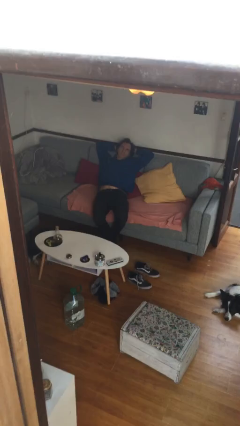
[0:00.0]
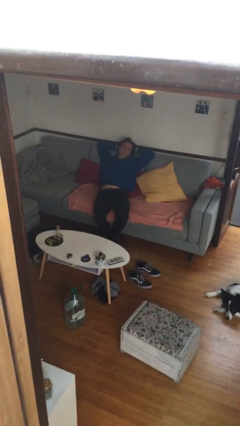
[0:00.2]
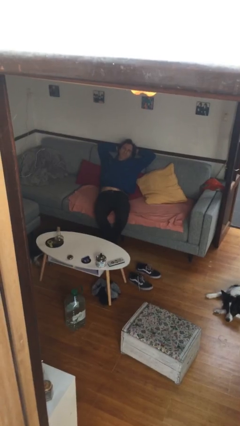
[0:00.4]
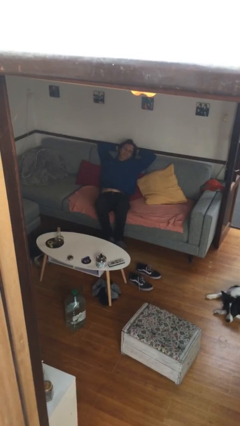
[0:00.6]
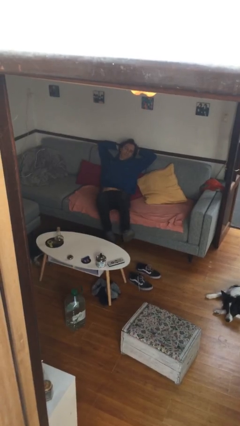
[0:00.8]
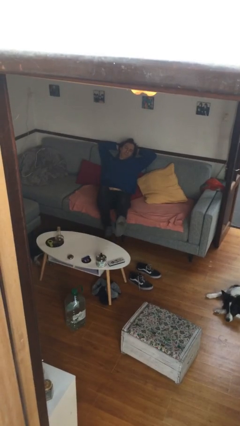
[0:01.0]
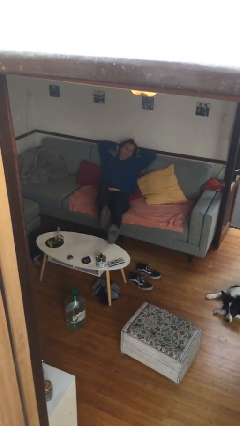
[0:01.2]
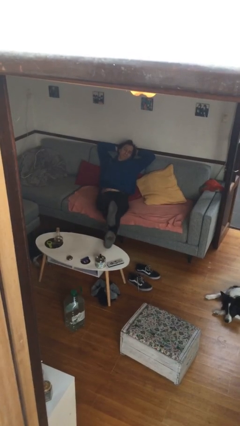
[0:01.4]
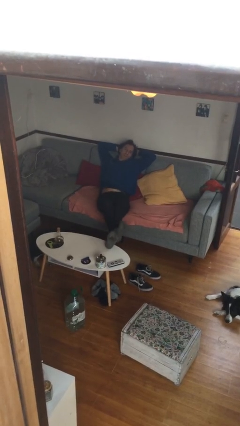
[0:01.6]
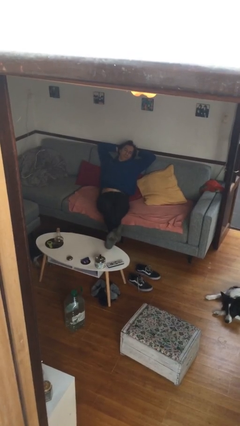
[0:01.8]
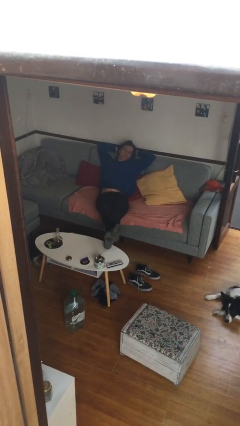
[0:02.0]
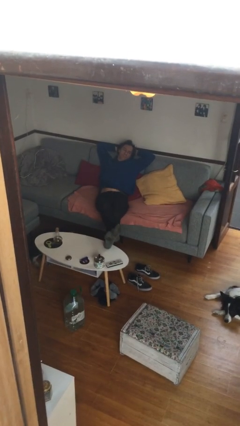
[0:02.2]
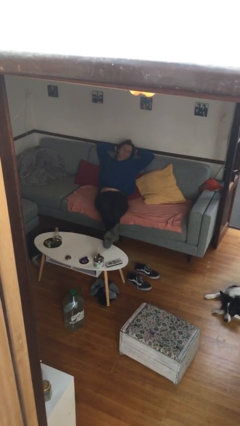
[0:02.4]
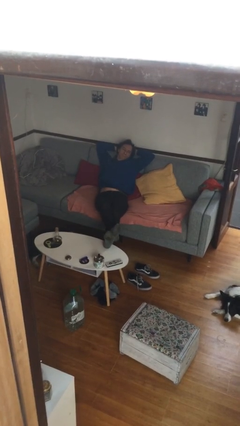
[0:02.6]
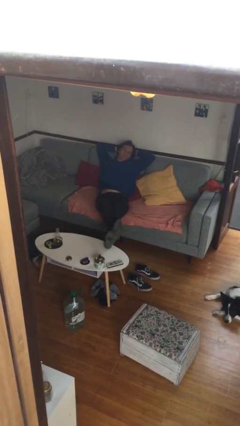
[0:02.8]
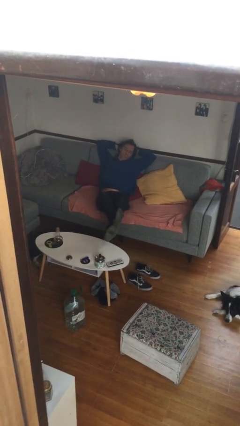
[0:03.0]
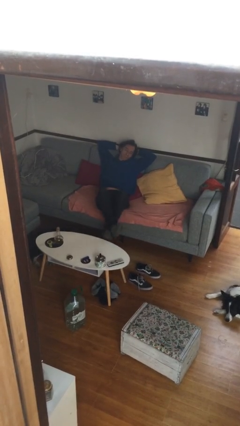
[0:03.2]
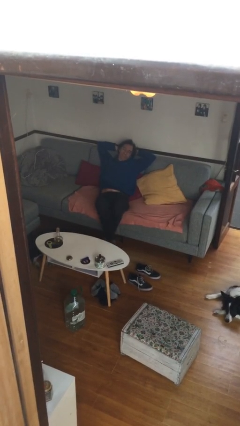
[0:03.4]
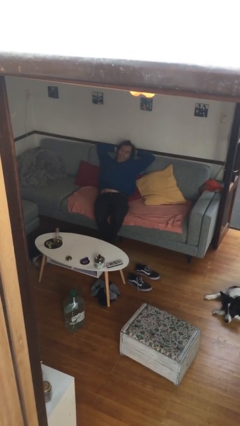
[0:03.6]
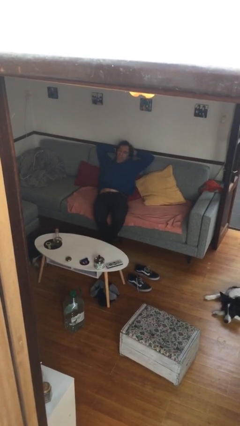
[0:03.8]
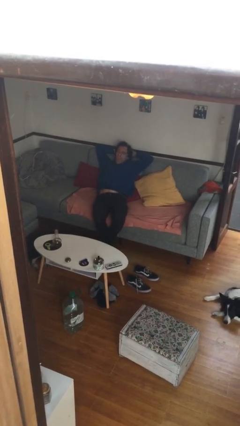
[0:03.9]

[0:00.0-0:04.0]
person puts feet up

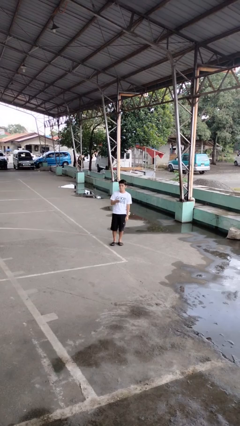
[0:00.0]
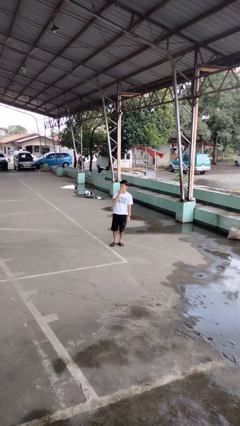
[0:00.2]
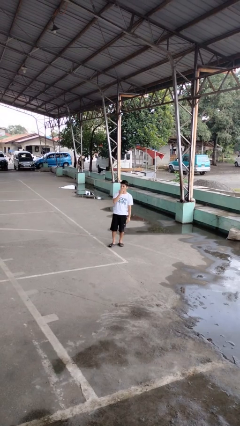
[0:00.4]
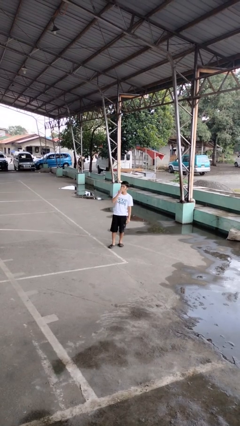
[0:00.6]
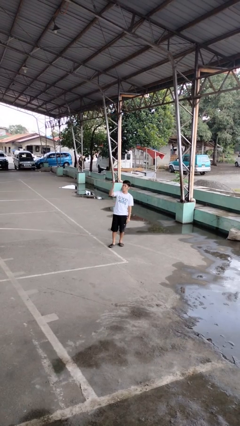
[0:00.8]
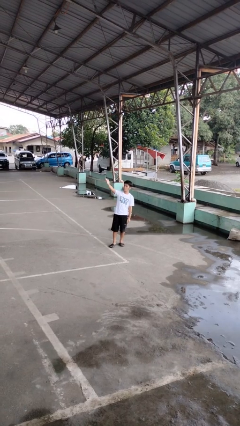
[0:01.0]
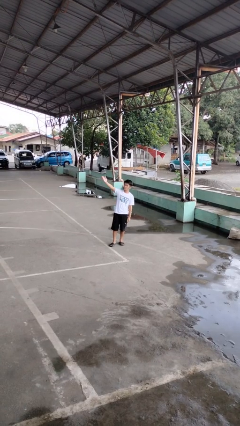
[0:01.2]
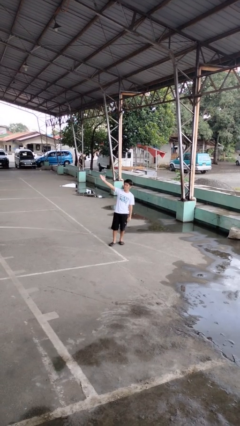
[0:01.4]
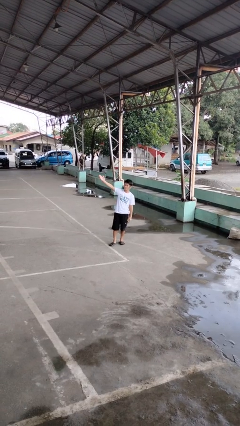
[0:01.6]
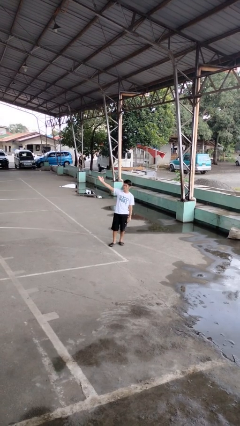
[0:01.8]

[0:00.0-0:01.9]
person gestures blow kiss

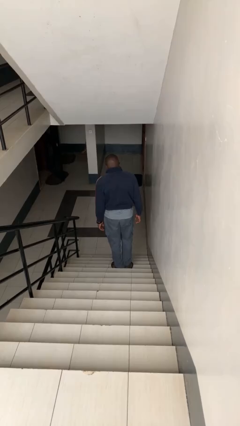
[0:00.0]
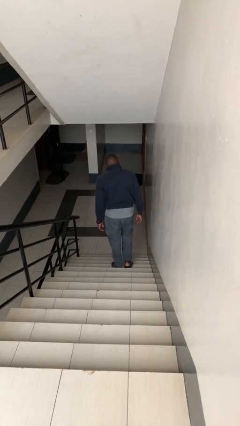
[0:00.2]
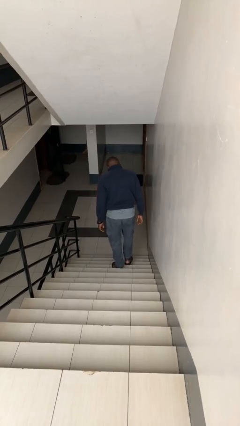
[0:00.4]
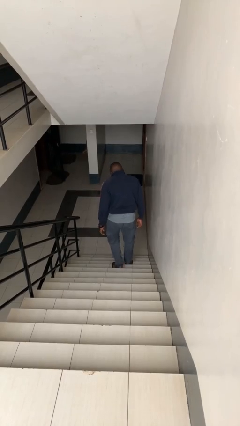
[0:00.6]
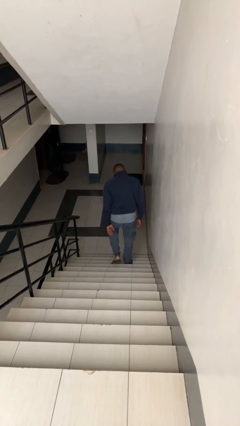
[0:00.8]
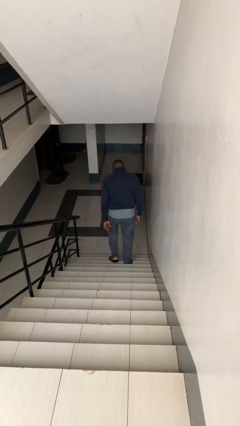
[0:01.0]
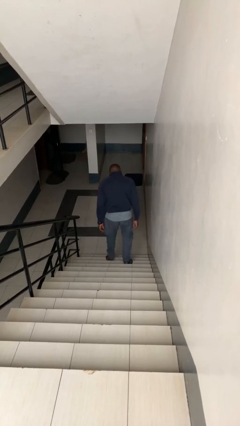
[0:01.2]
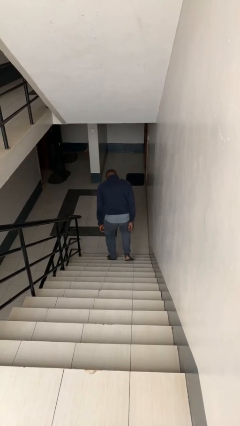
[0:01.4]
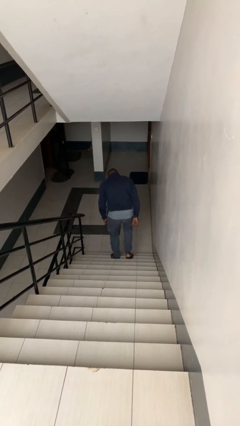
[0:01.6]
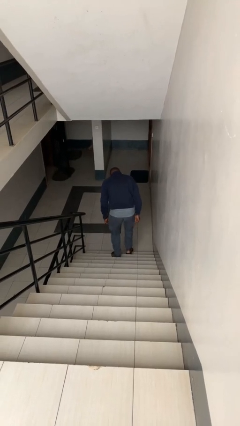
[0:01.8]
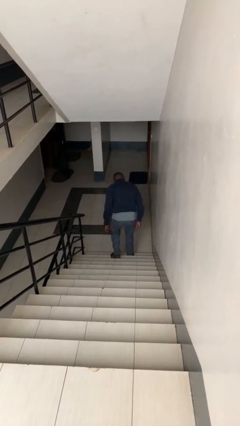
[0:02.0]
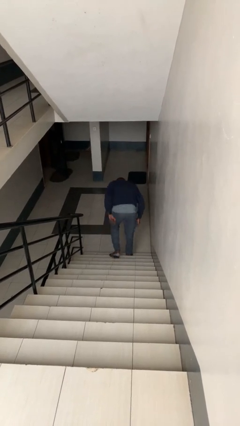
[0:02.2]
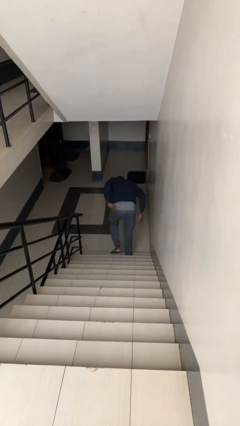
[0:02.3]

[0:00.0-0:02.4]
person climbs down stairs

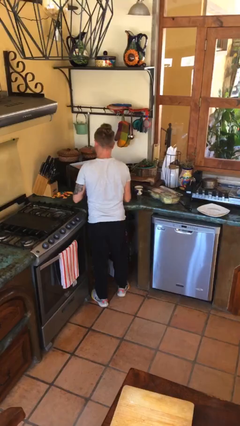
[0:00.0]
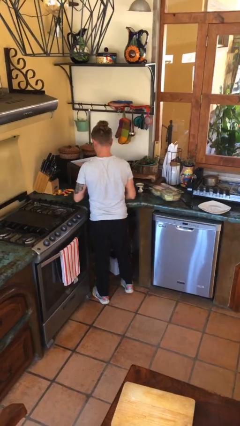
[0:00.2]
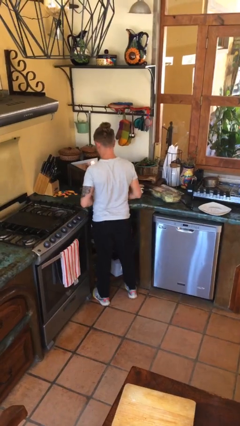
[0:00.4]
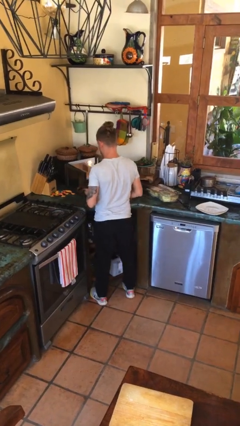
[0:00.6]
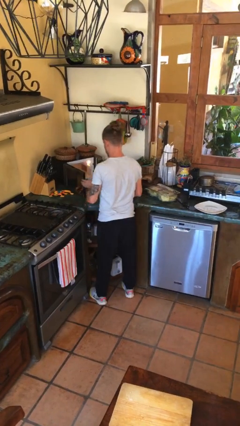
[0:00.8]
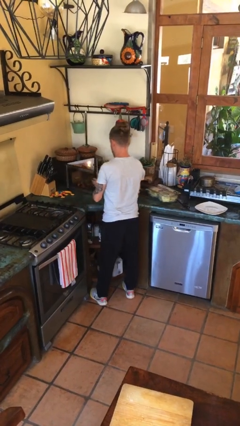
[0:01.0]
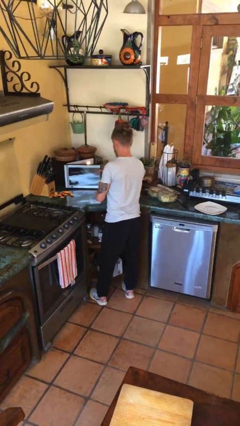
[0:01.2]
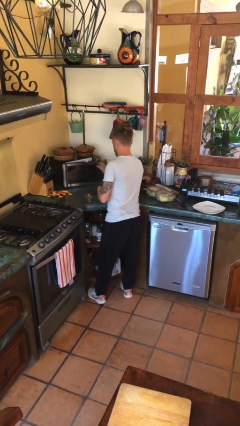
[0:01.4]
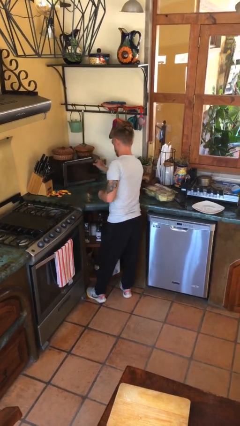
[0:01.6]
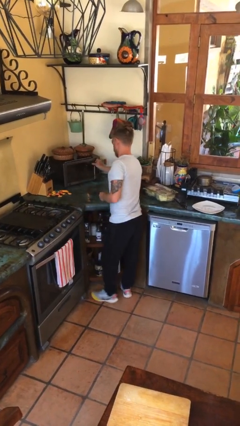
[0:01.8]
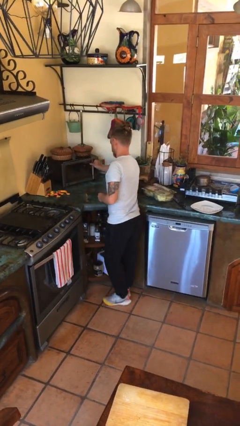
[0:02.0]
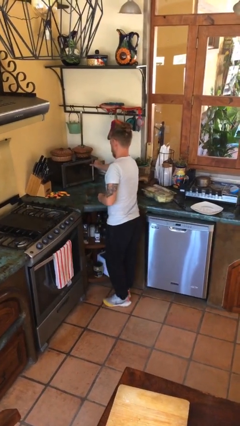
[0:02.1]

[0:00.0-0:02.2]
person closes microwave

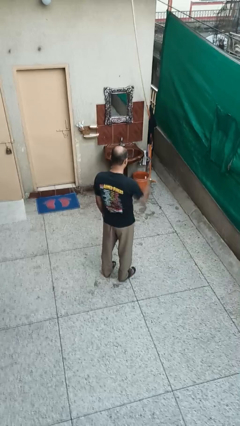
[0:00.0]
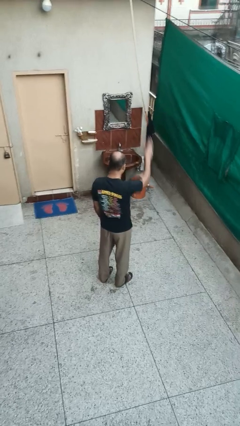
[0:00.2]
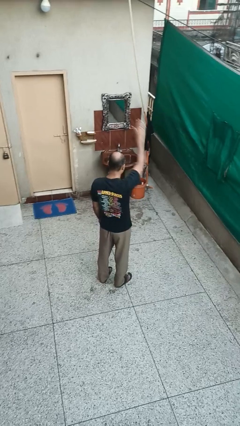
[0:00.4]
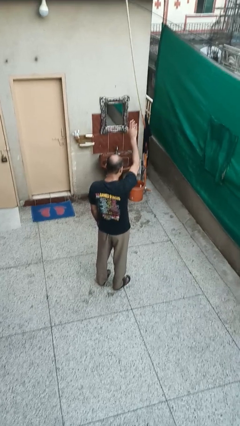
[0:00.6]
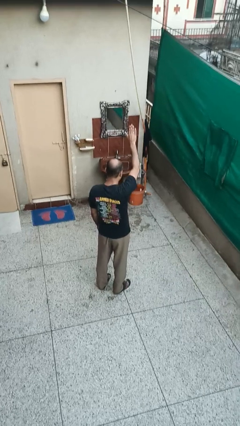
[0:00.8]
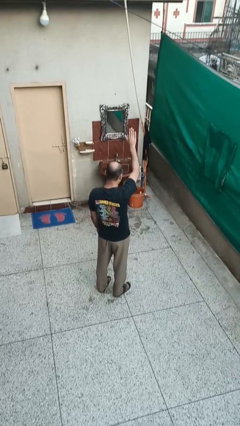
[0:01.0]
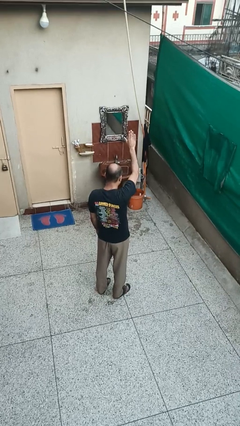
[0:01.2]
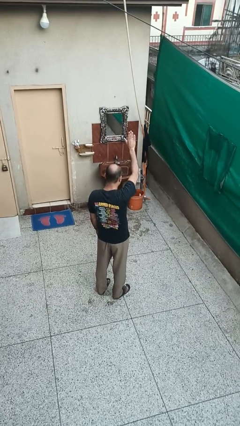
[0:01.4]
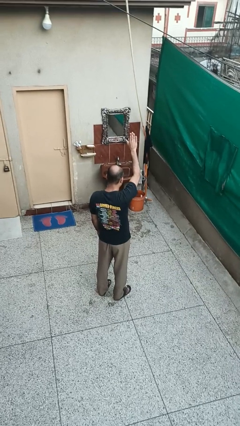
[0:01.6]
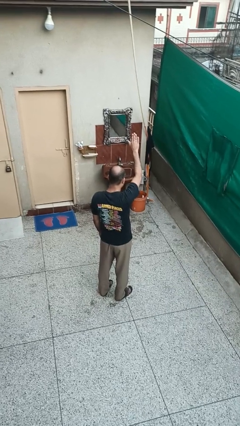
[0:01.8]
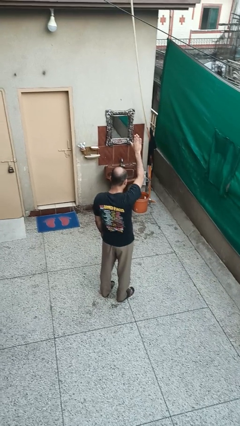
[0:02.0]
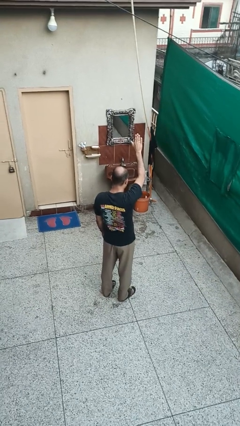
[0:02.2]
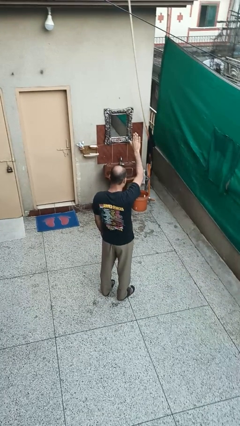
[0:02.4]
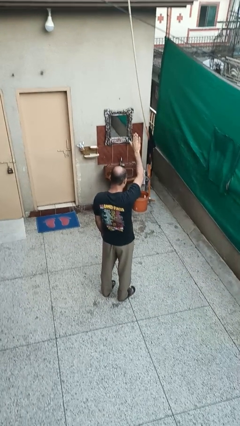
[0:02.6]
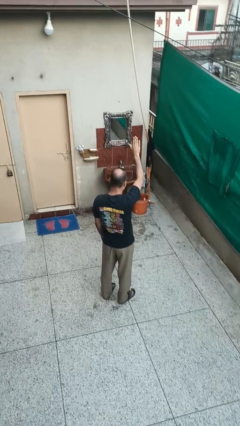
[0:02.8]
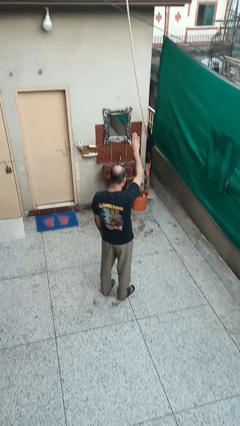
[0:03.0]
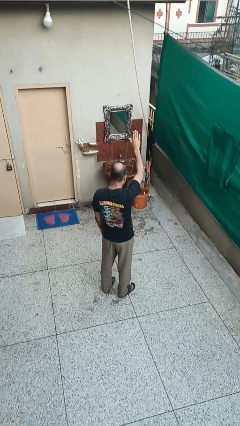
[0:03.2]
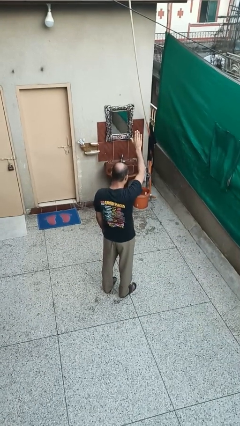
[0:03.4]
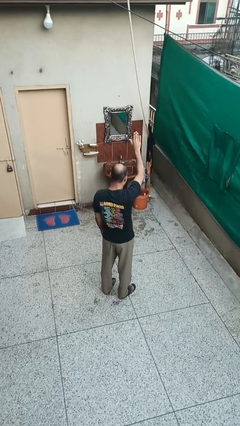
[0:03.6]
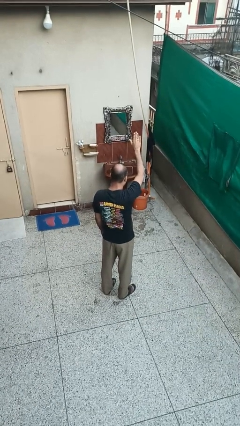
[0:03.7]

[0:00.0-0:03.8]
person gestures raise hand

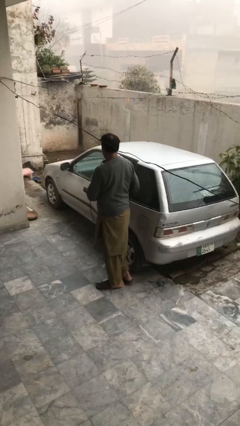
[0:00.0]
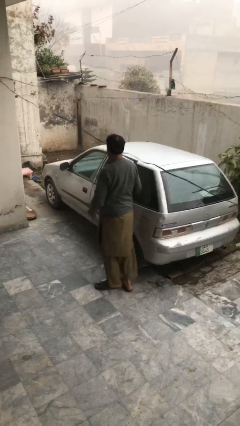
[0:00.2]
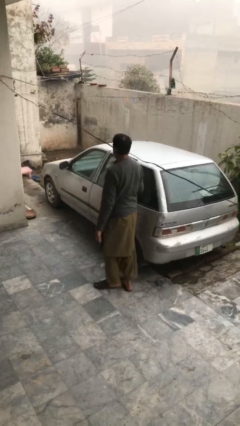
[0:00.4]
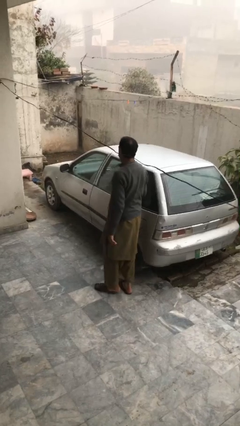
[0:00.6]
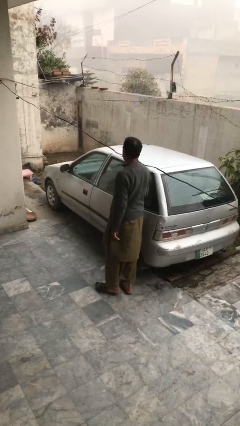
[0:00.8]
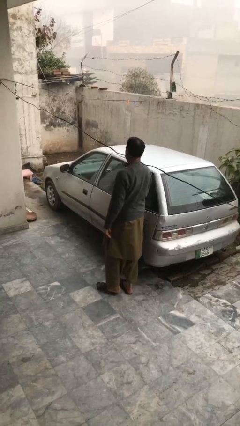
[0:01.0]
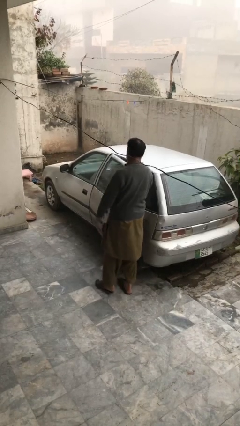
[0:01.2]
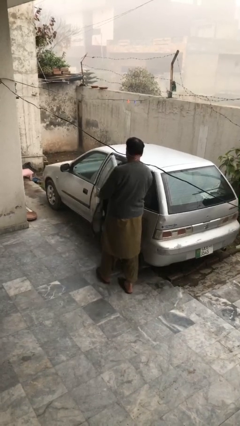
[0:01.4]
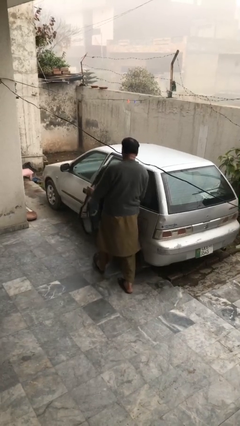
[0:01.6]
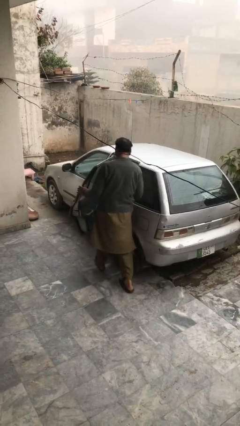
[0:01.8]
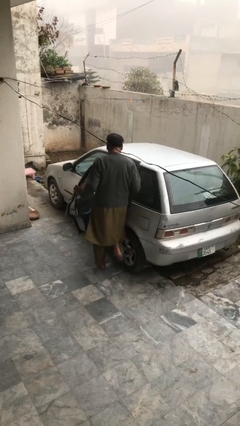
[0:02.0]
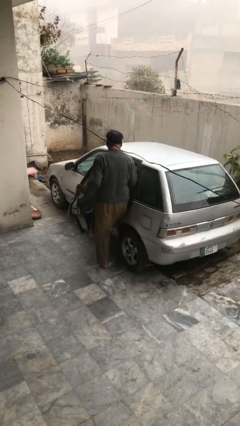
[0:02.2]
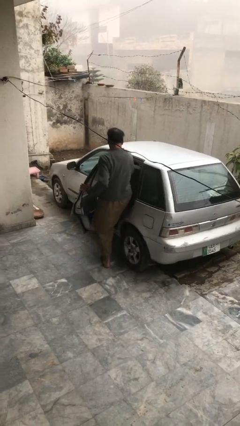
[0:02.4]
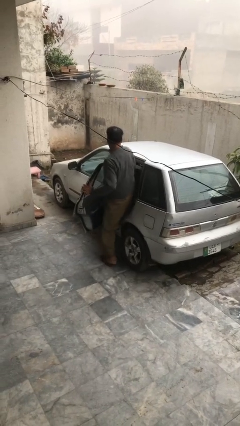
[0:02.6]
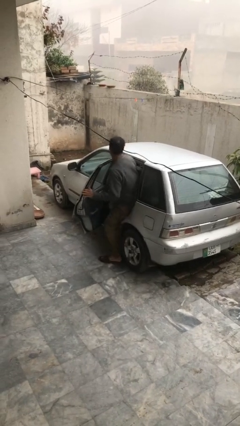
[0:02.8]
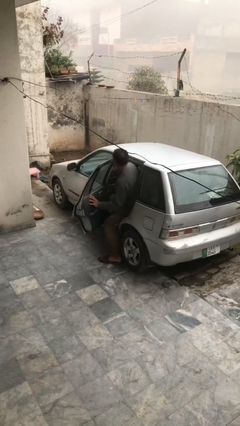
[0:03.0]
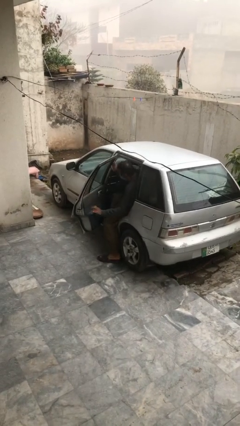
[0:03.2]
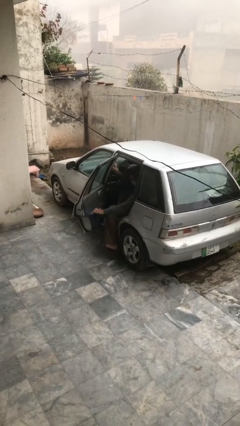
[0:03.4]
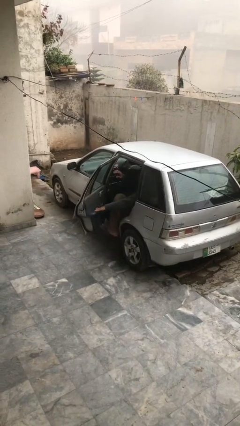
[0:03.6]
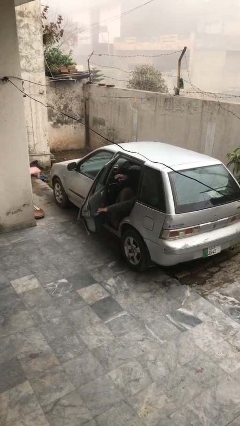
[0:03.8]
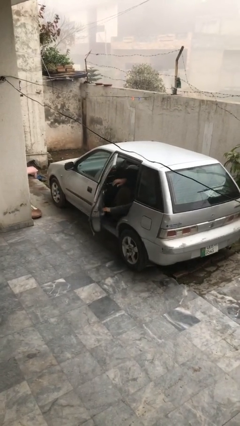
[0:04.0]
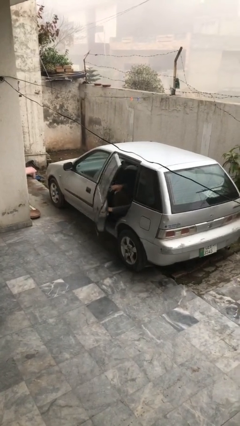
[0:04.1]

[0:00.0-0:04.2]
car picks up person
